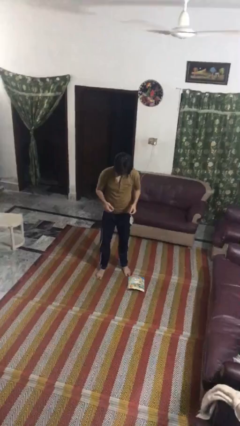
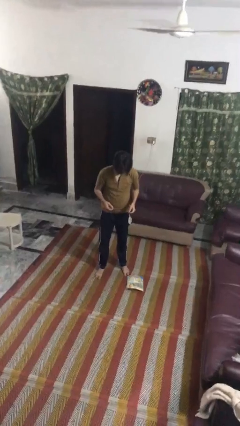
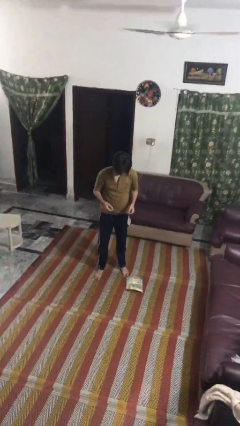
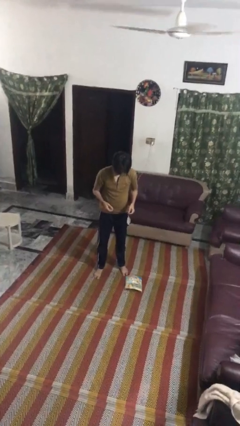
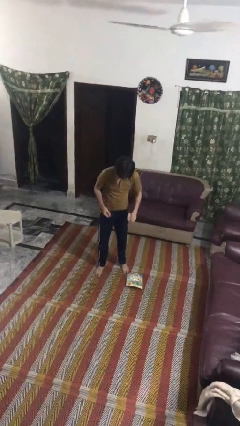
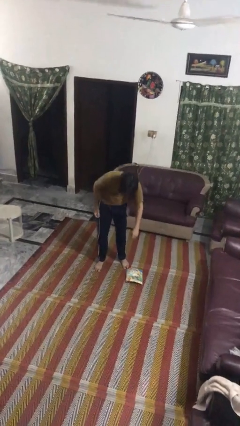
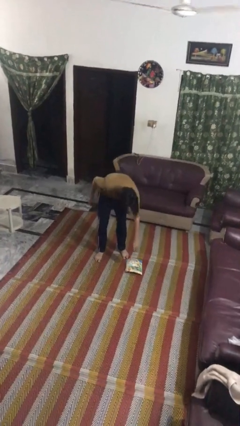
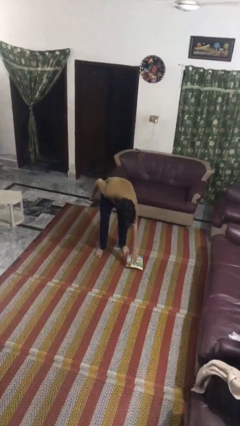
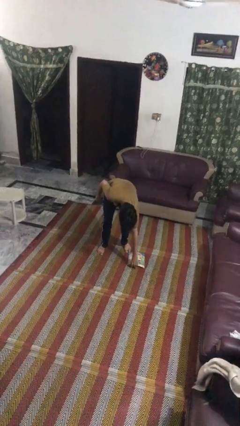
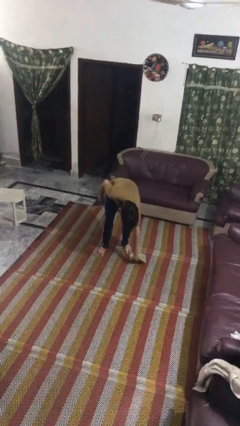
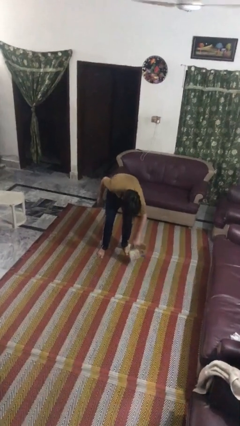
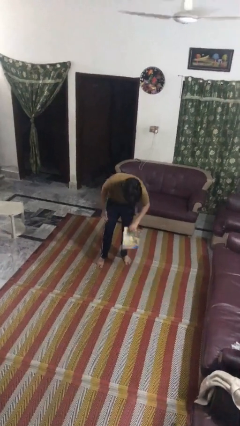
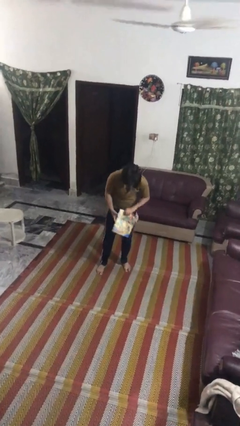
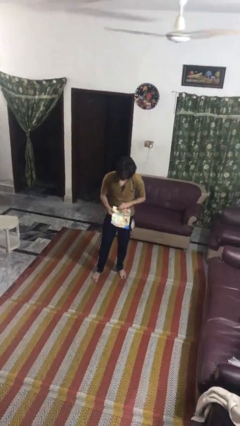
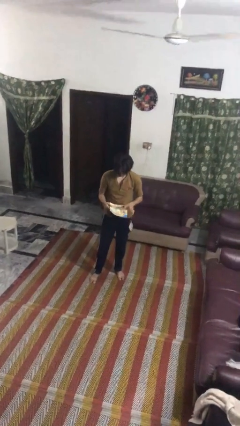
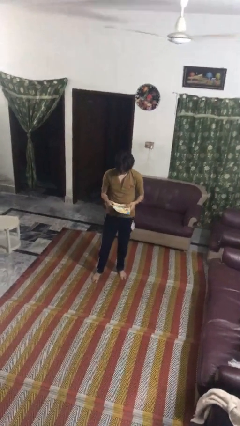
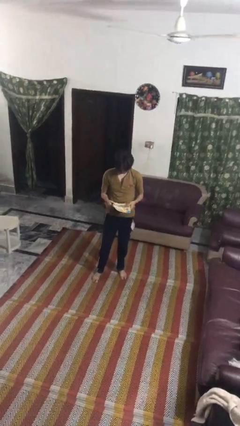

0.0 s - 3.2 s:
person picks up object from floor

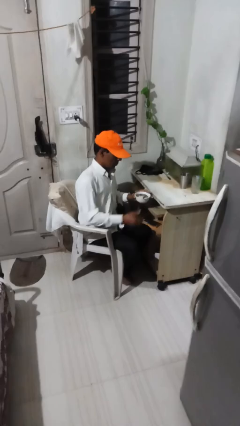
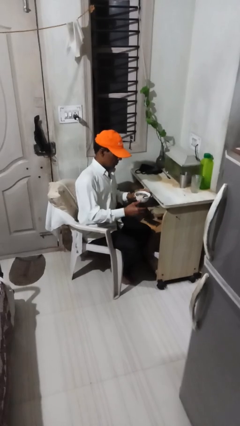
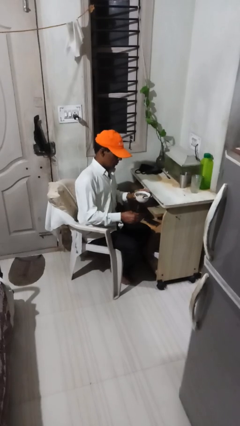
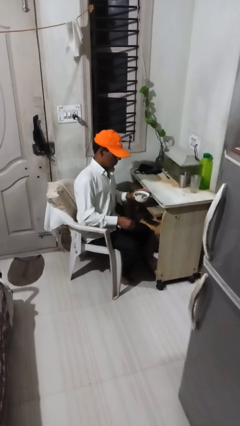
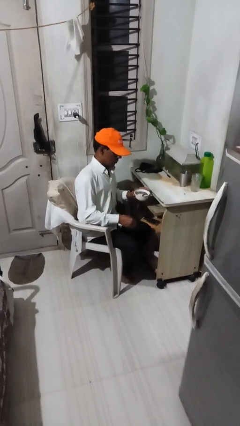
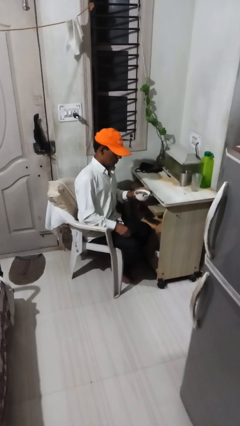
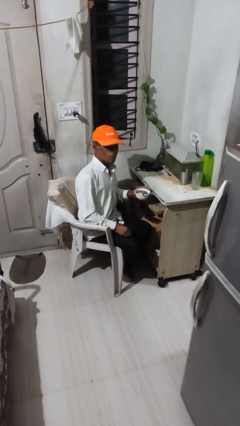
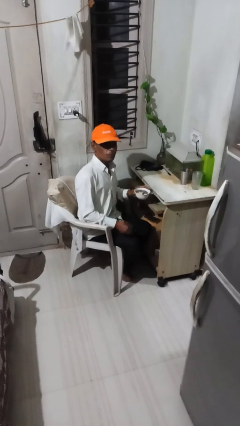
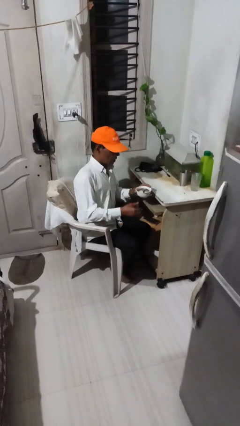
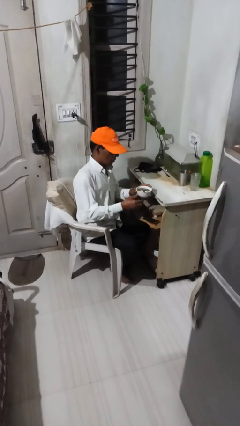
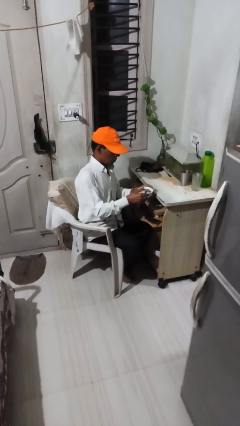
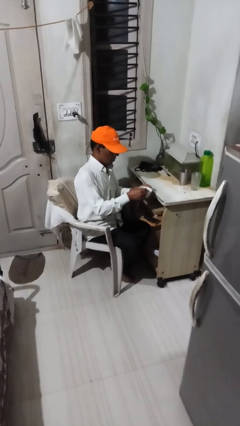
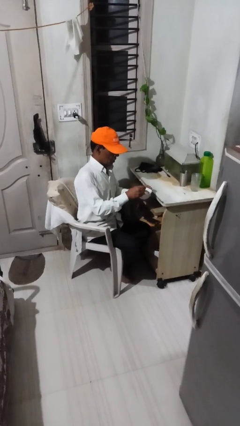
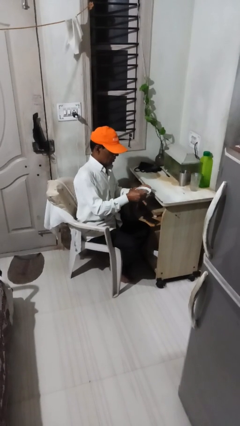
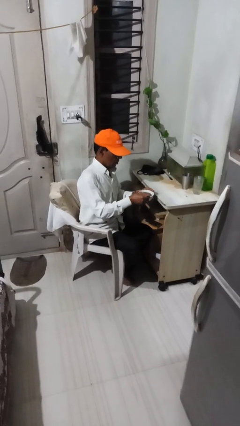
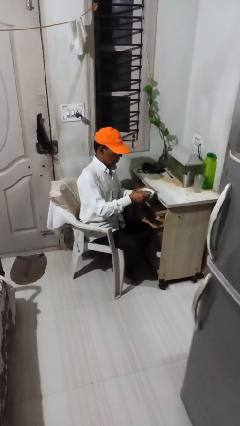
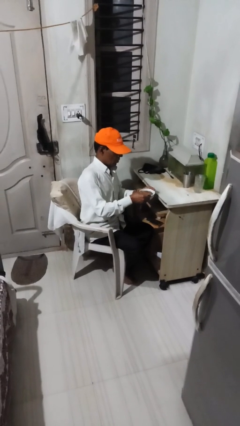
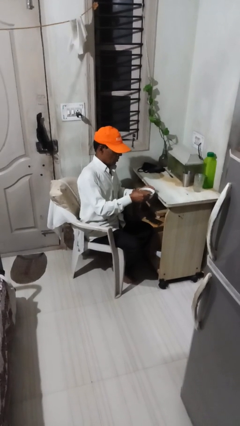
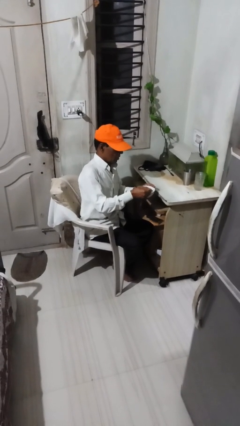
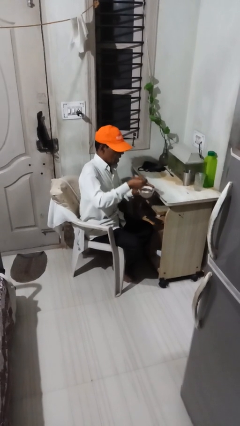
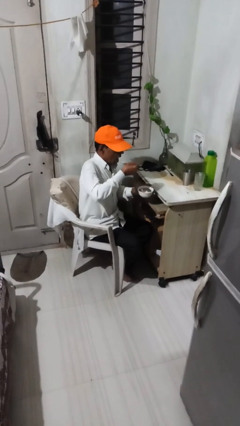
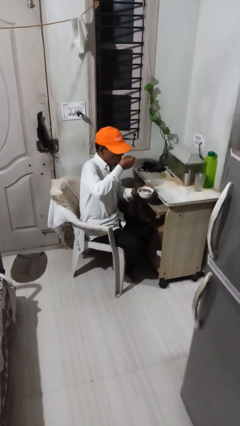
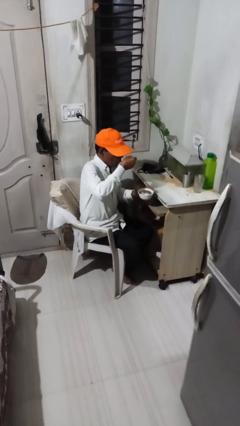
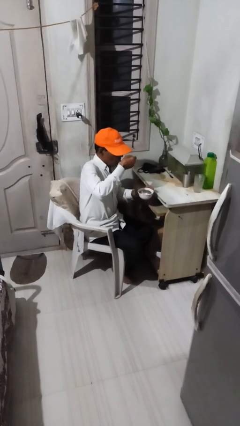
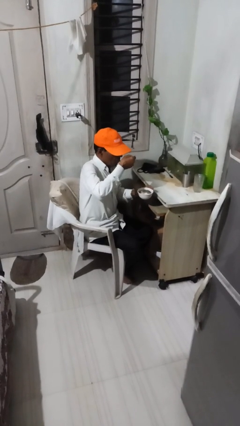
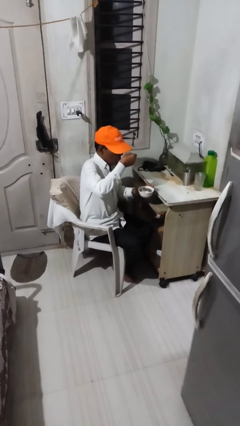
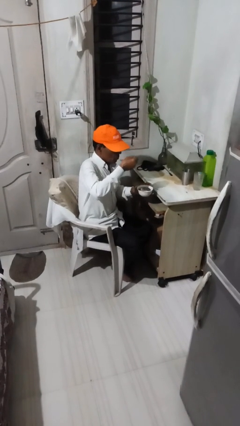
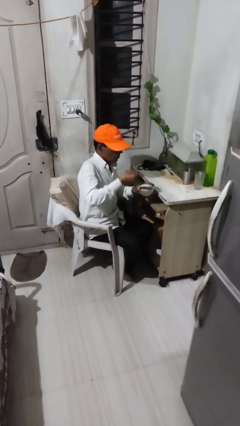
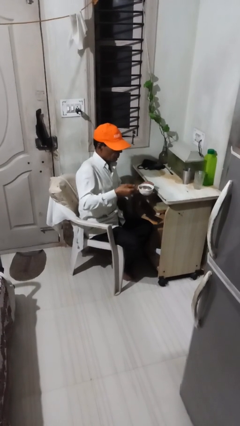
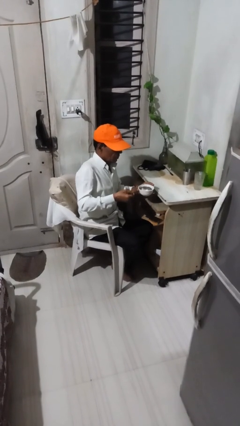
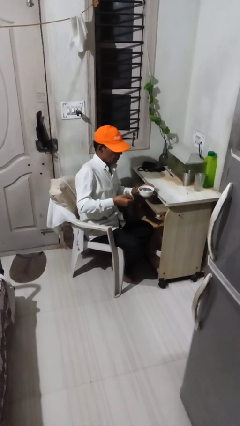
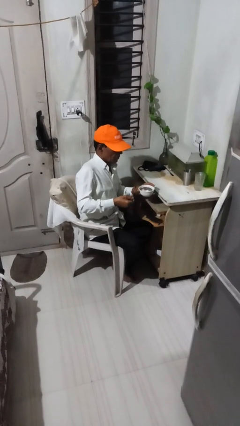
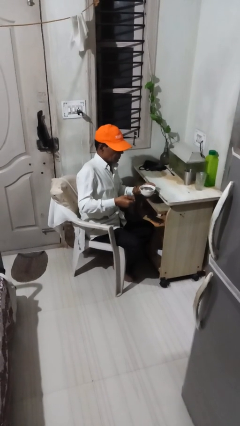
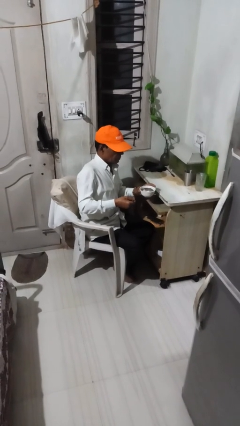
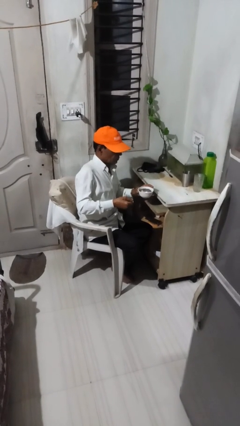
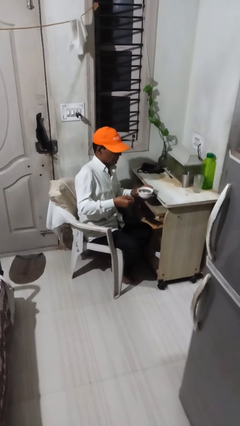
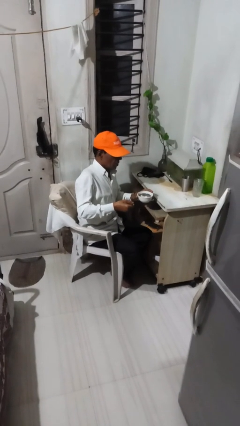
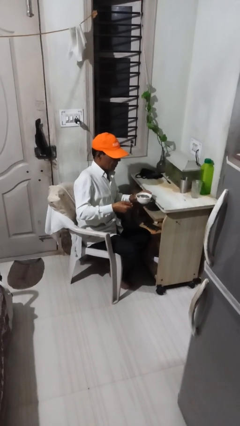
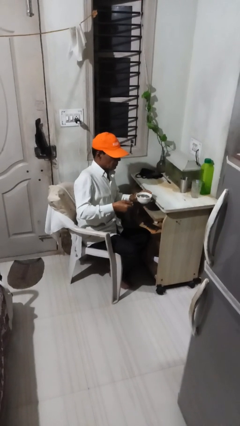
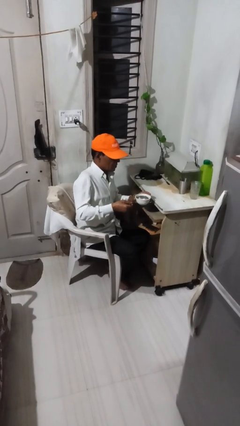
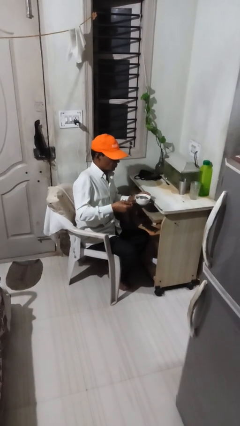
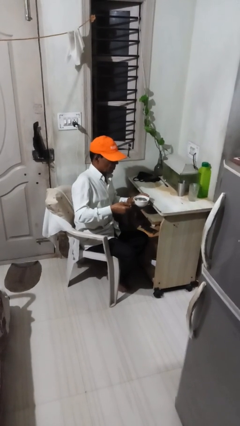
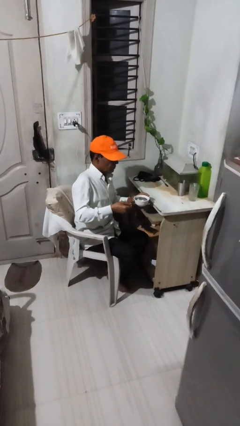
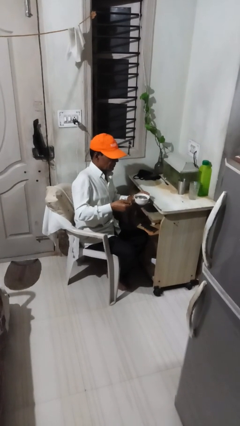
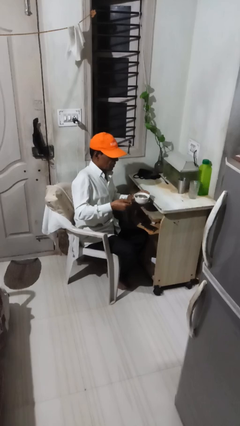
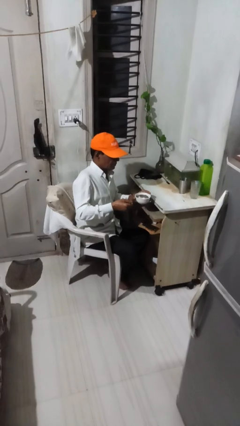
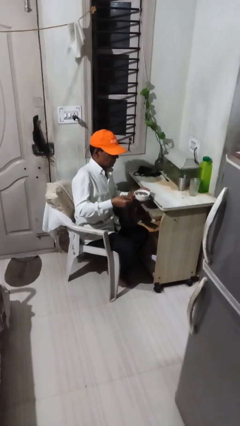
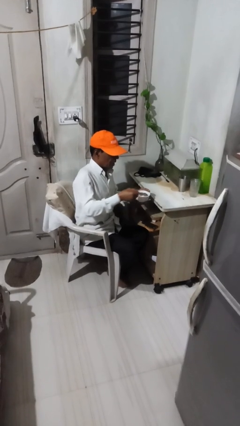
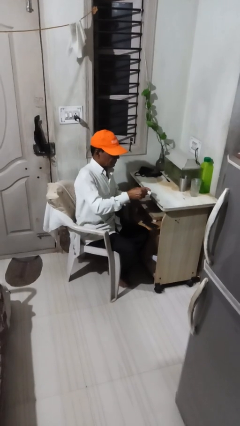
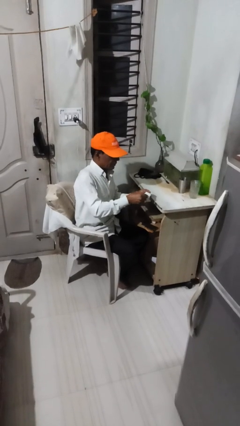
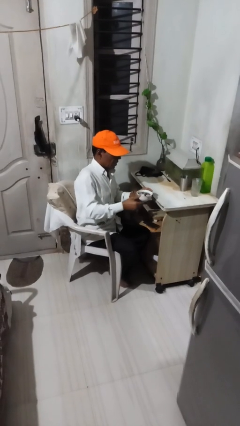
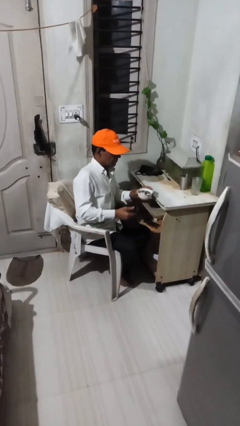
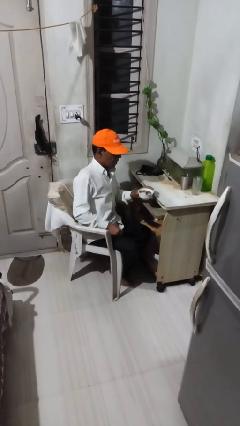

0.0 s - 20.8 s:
person eats with utensil

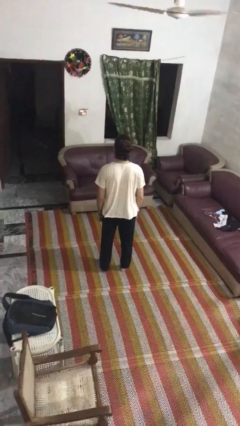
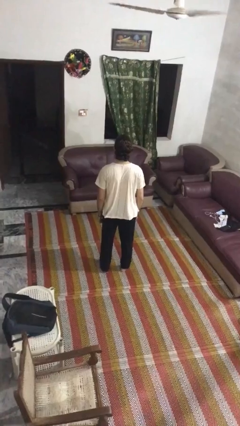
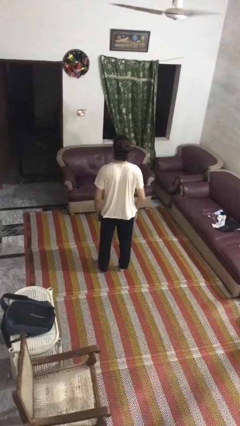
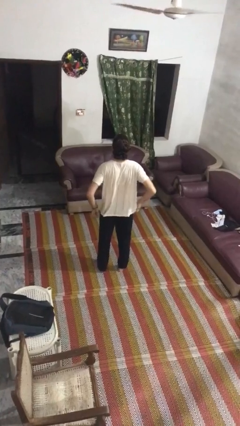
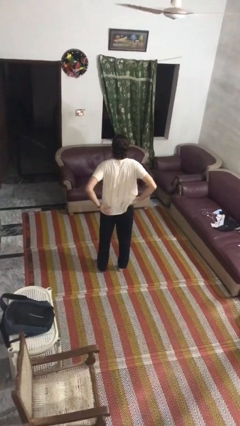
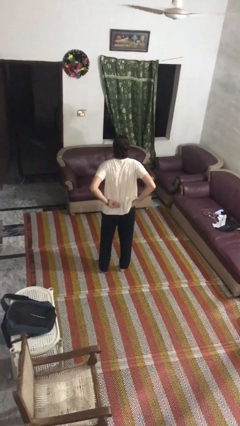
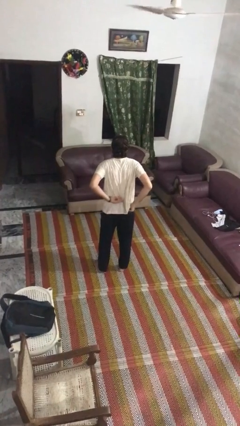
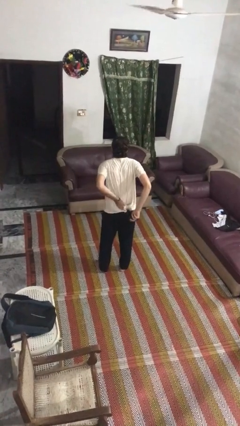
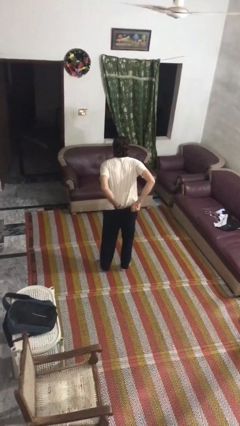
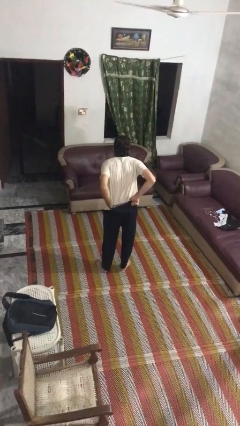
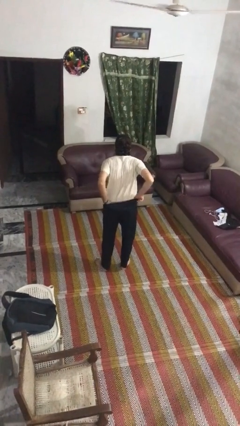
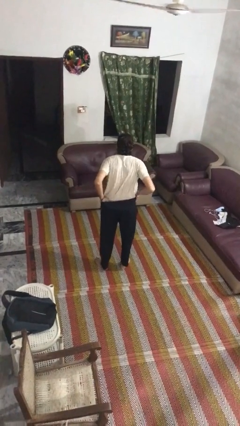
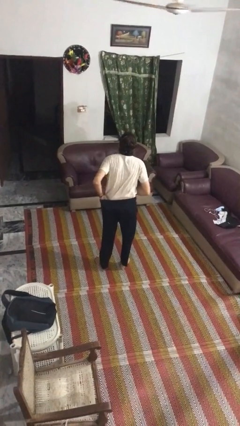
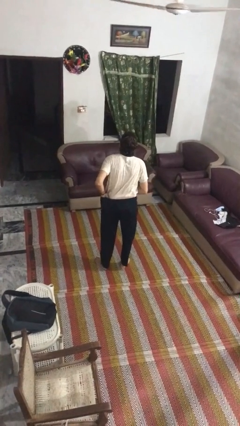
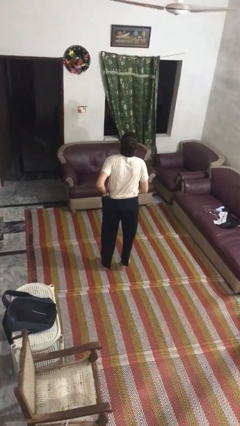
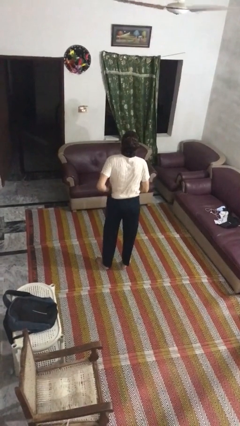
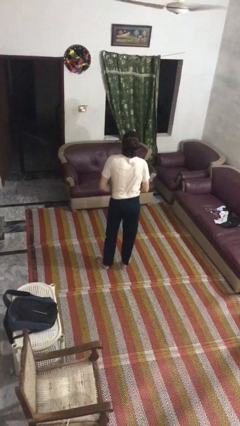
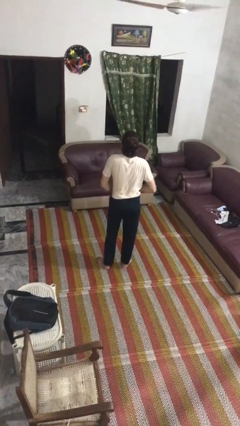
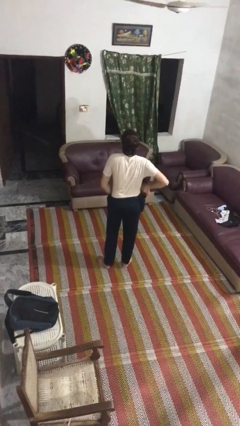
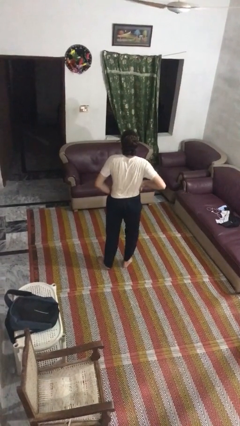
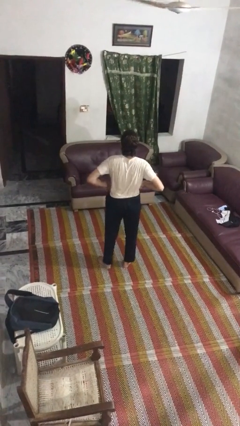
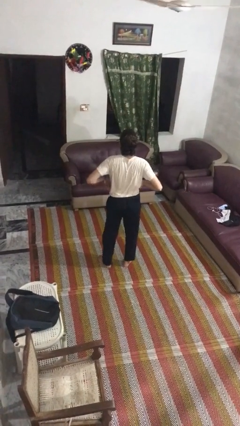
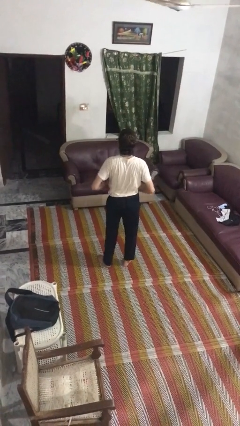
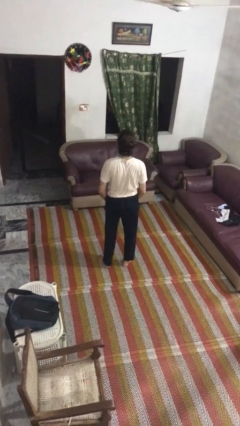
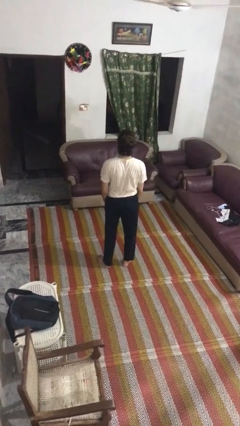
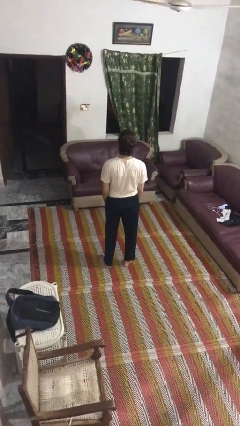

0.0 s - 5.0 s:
person tucks in shirt
